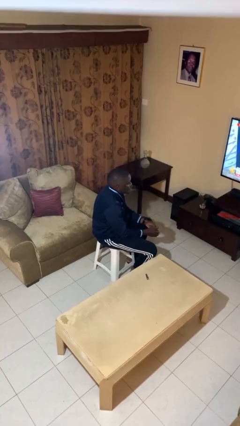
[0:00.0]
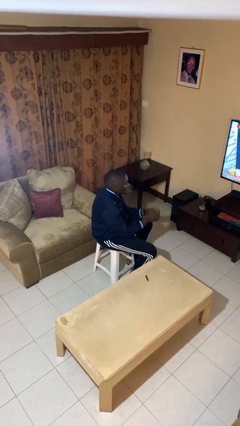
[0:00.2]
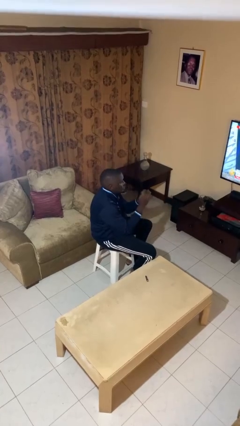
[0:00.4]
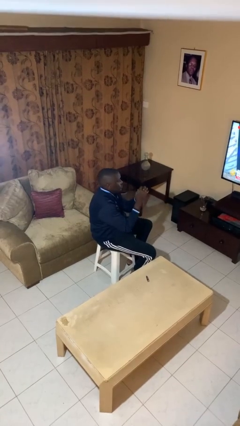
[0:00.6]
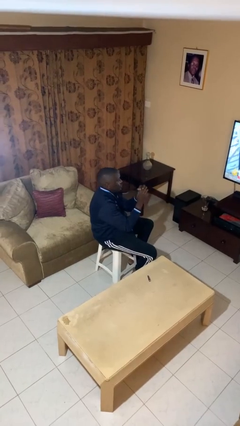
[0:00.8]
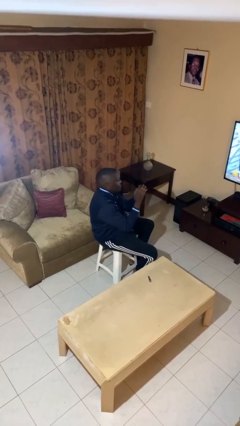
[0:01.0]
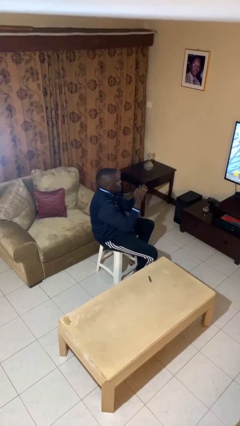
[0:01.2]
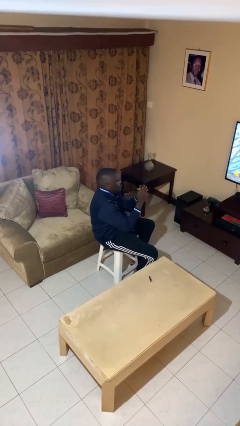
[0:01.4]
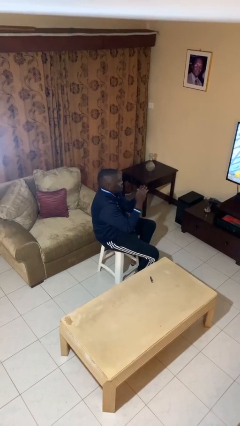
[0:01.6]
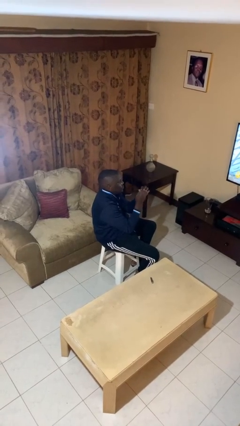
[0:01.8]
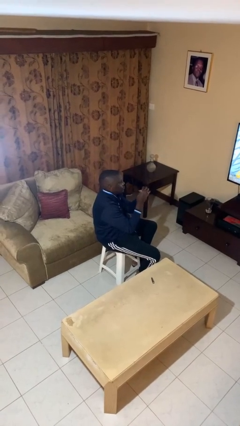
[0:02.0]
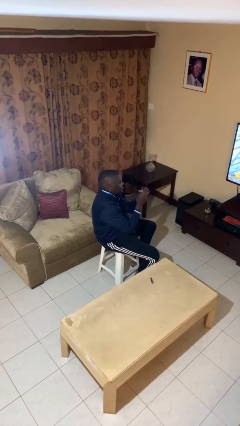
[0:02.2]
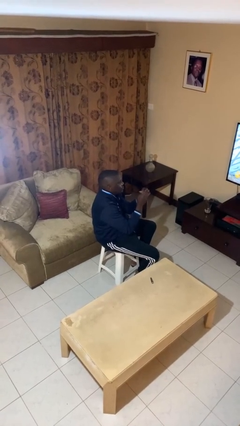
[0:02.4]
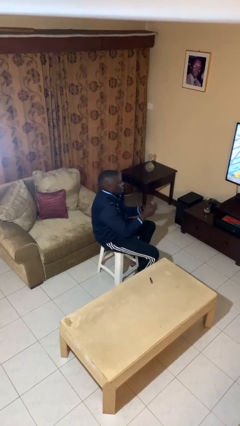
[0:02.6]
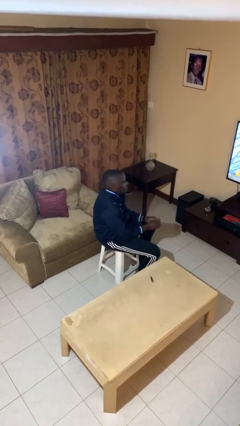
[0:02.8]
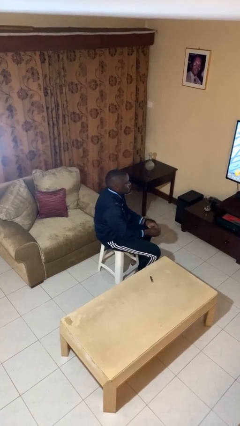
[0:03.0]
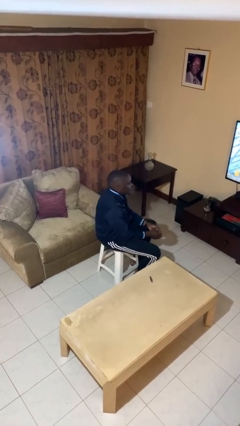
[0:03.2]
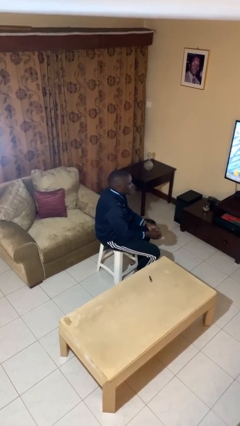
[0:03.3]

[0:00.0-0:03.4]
person files fingernails

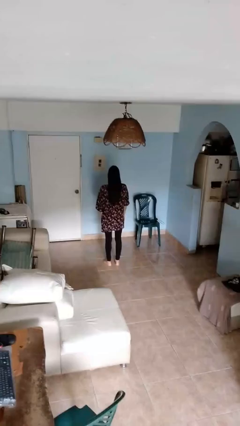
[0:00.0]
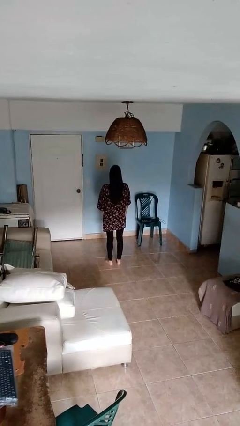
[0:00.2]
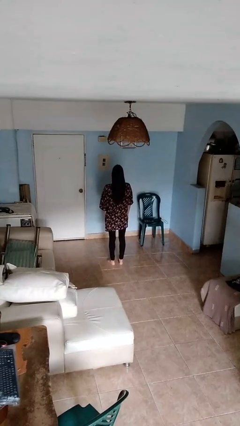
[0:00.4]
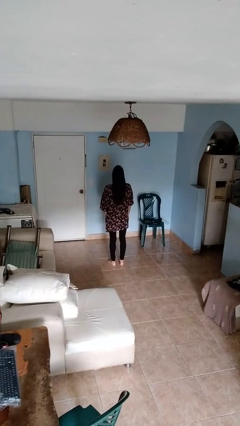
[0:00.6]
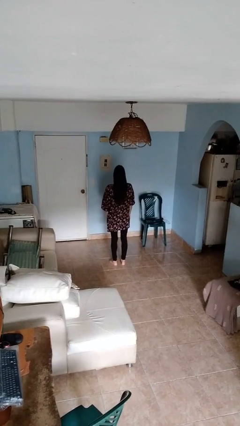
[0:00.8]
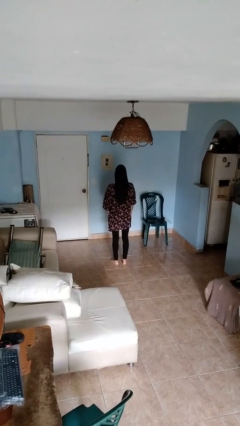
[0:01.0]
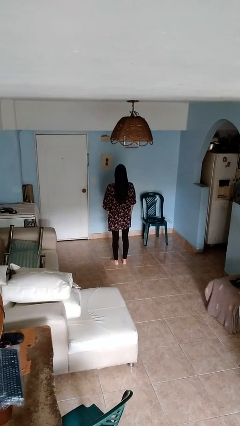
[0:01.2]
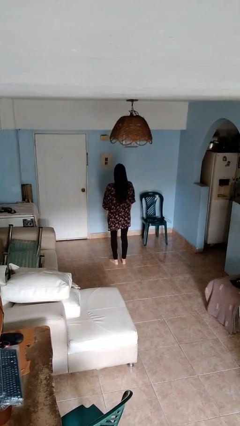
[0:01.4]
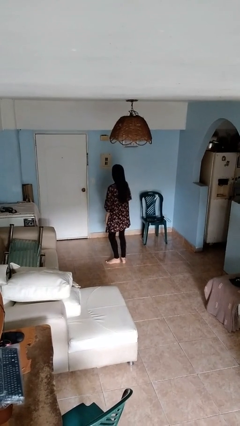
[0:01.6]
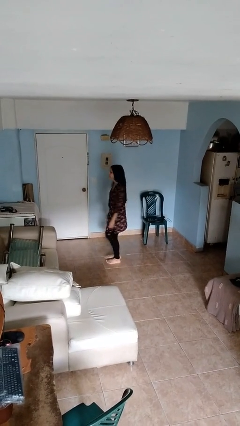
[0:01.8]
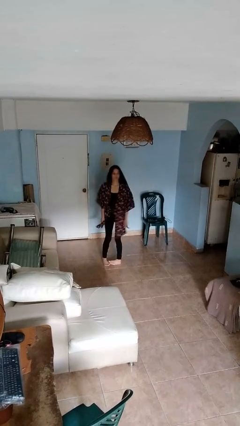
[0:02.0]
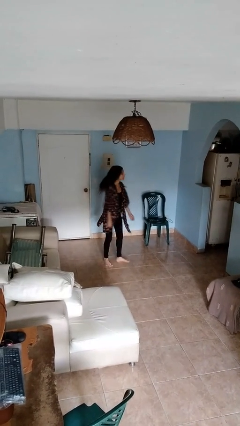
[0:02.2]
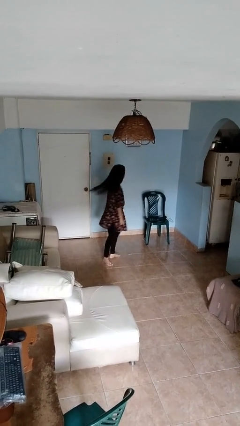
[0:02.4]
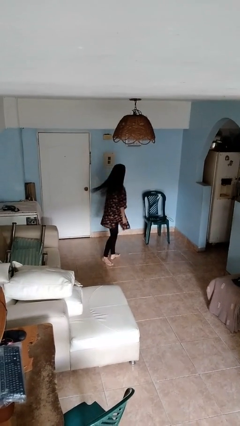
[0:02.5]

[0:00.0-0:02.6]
person twirls

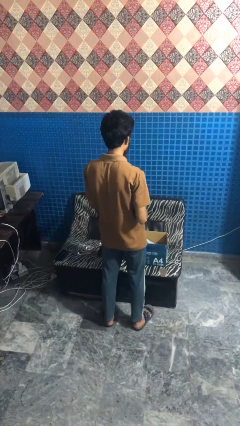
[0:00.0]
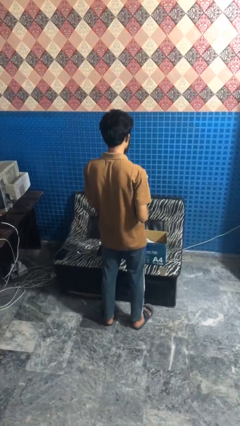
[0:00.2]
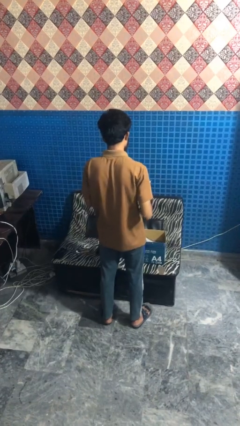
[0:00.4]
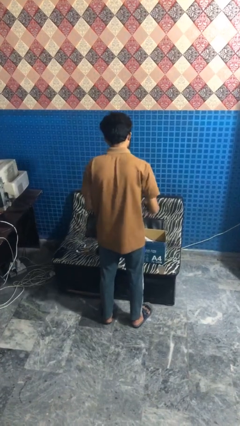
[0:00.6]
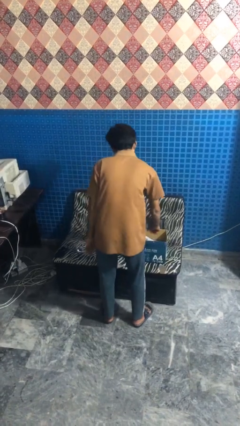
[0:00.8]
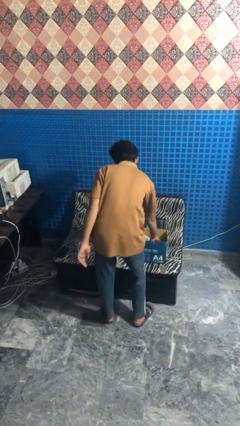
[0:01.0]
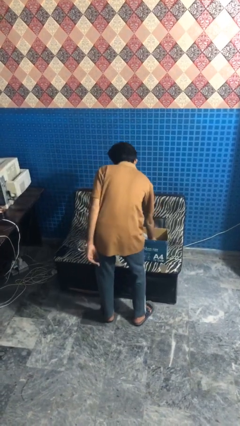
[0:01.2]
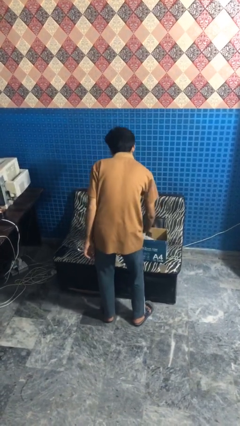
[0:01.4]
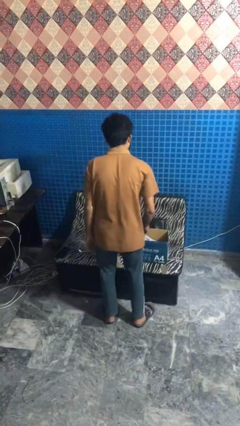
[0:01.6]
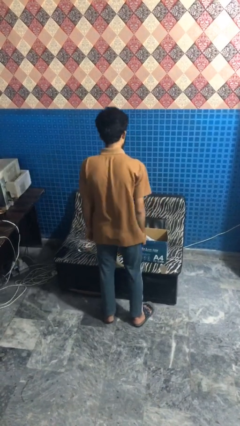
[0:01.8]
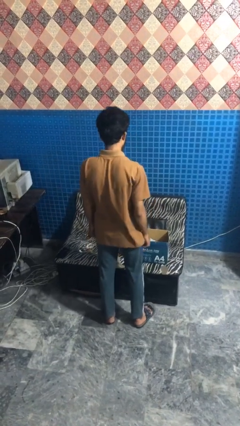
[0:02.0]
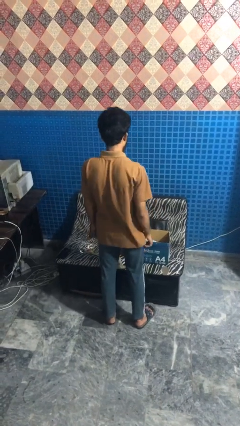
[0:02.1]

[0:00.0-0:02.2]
person puts object into box

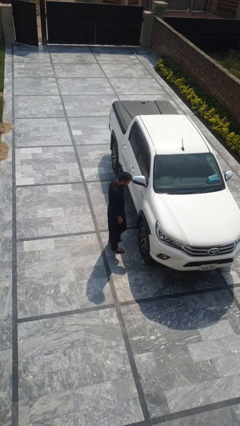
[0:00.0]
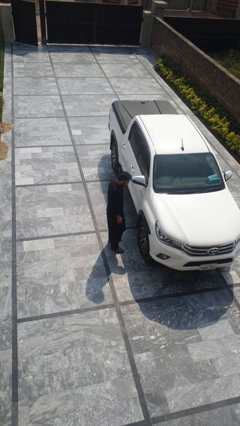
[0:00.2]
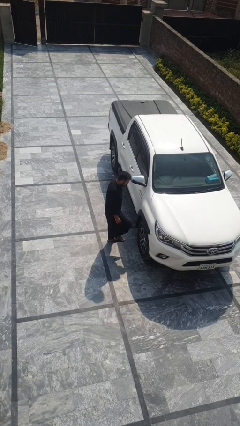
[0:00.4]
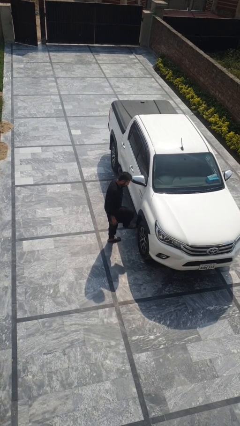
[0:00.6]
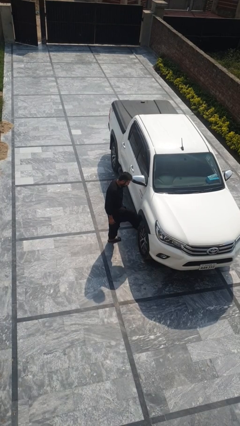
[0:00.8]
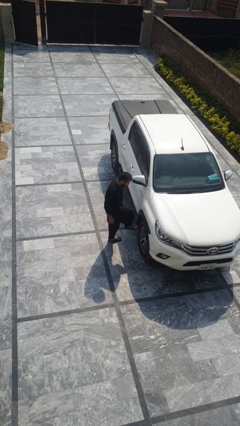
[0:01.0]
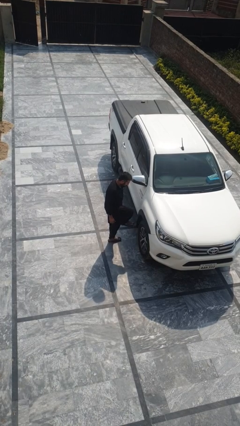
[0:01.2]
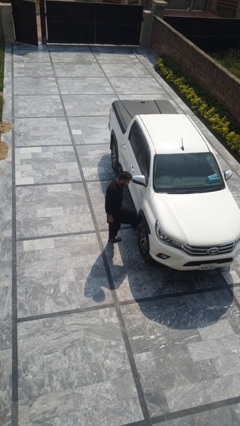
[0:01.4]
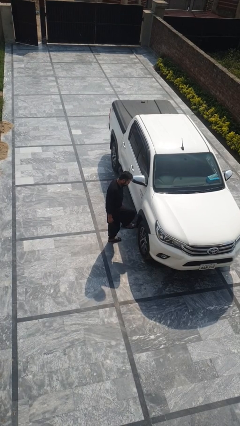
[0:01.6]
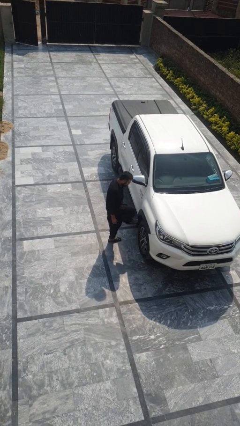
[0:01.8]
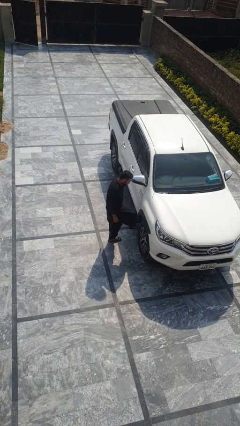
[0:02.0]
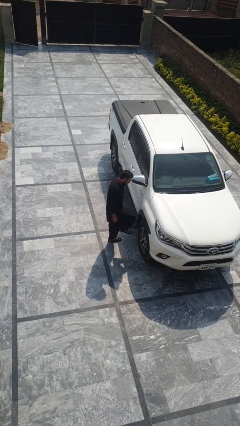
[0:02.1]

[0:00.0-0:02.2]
person kicks car tires

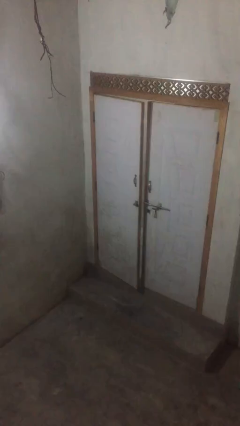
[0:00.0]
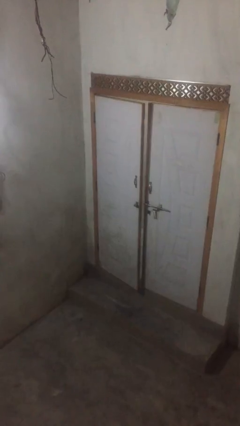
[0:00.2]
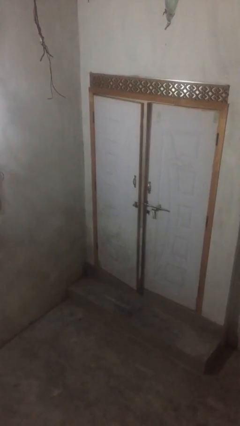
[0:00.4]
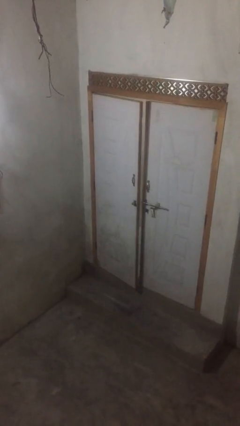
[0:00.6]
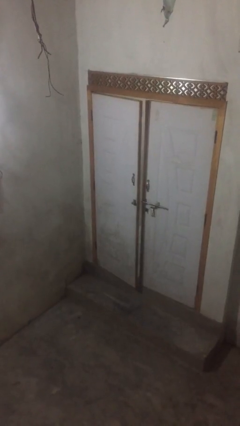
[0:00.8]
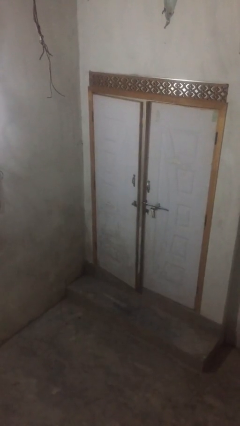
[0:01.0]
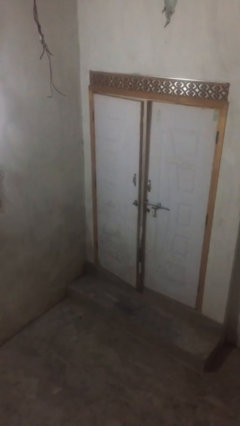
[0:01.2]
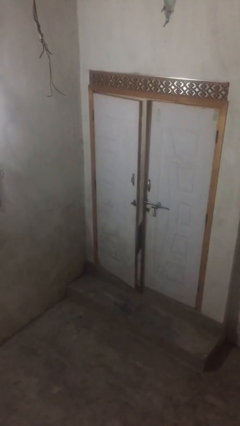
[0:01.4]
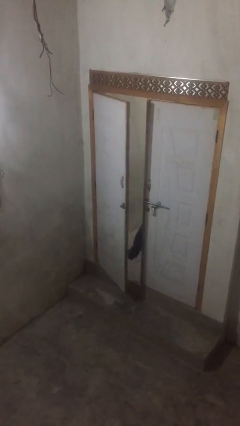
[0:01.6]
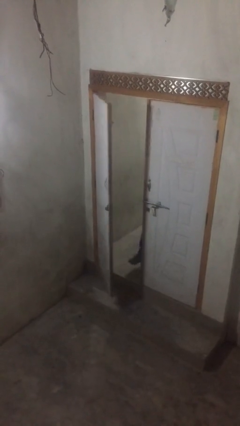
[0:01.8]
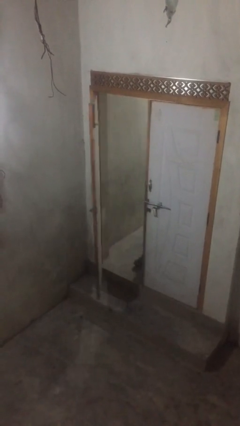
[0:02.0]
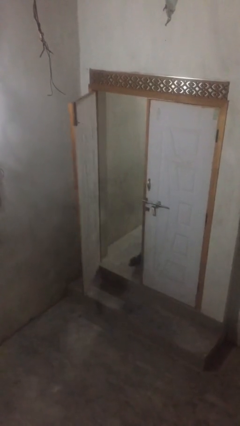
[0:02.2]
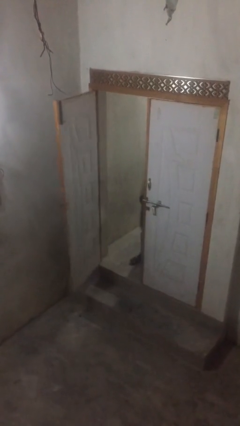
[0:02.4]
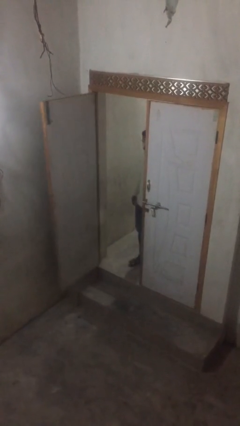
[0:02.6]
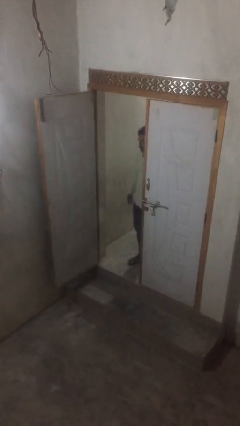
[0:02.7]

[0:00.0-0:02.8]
person opens facility door

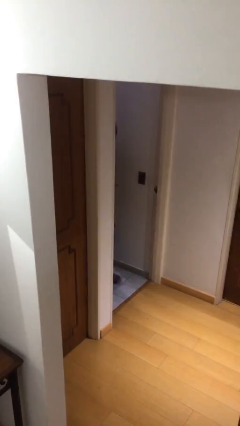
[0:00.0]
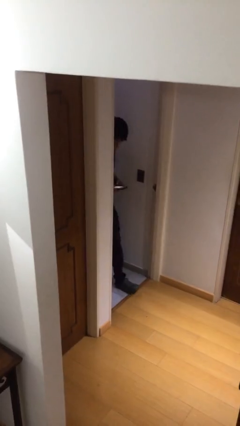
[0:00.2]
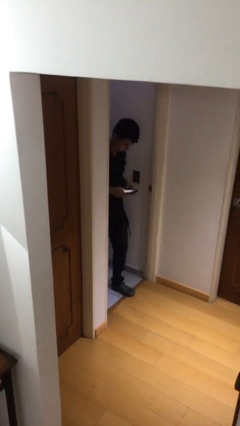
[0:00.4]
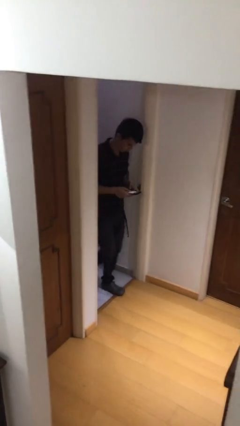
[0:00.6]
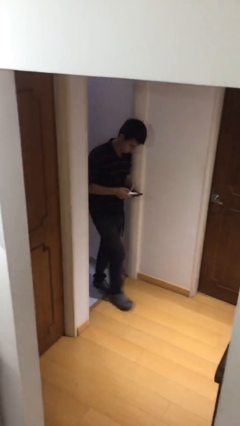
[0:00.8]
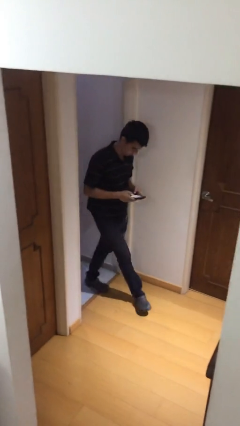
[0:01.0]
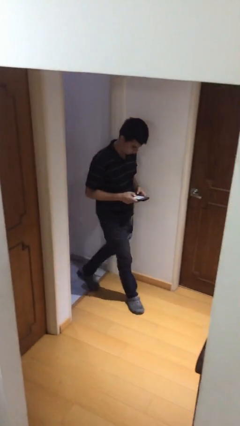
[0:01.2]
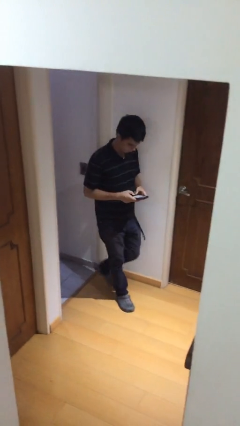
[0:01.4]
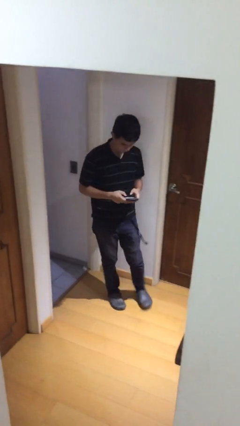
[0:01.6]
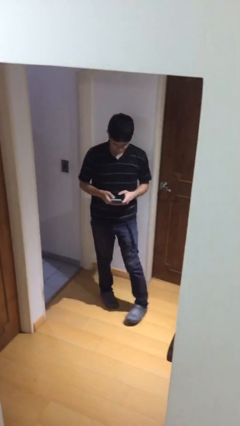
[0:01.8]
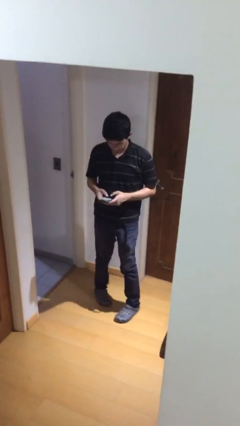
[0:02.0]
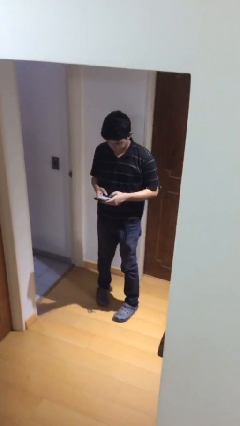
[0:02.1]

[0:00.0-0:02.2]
person enters scene through structure

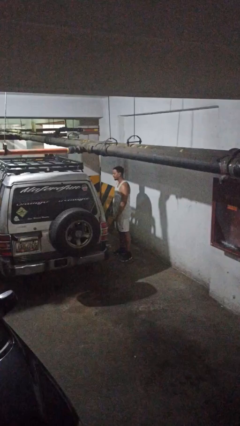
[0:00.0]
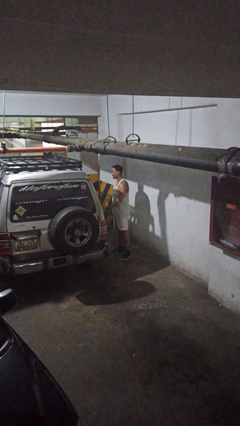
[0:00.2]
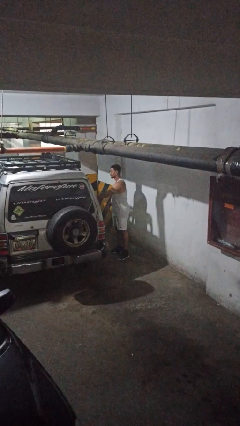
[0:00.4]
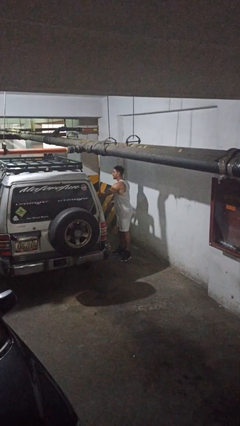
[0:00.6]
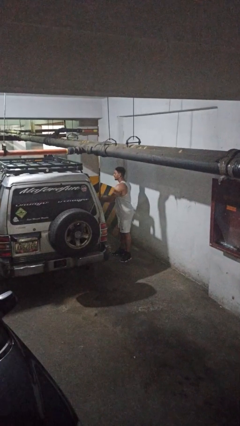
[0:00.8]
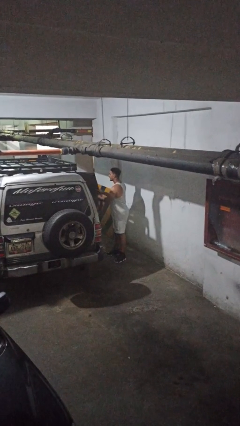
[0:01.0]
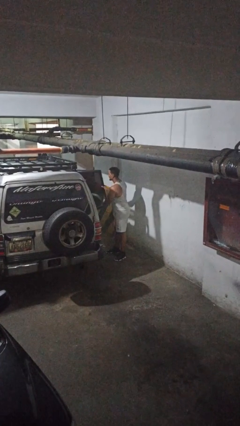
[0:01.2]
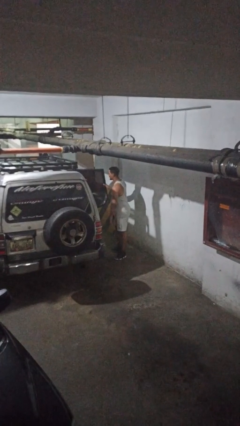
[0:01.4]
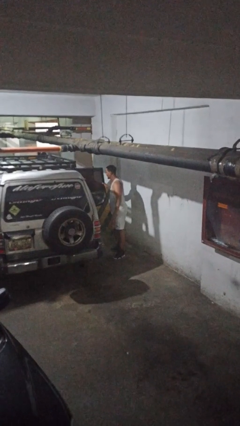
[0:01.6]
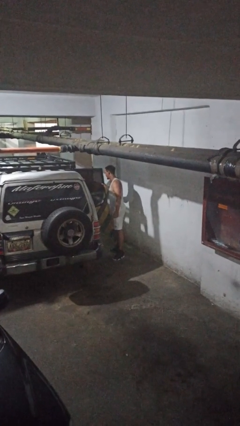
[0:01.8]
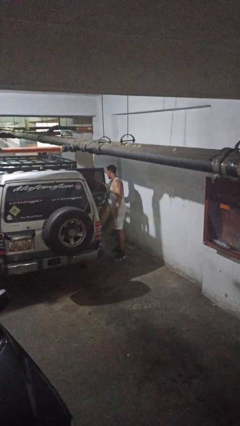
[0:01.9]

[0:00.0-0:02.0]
person opens car door
